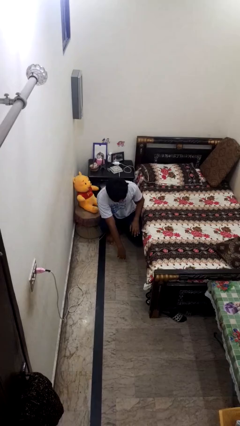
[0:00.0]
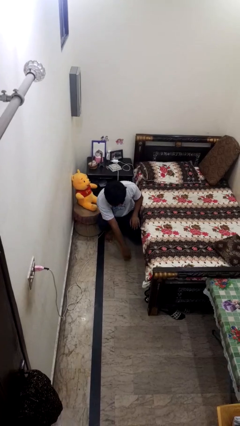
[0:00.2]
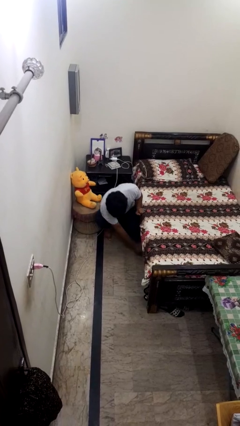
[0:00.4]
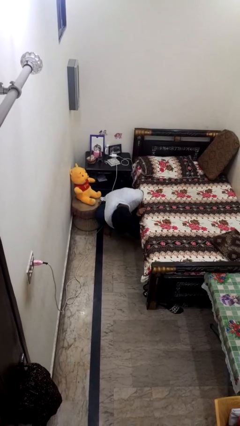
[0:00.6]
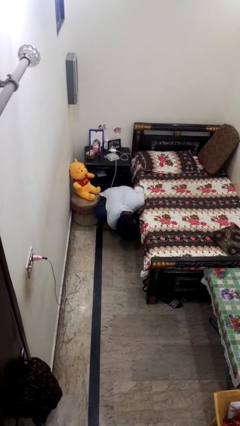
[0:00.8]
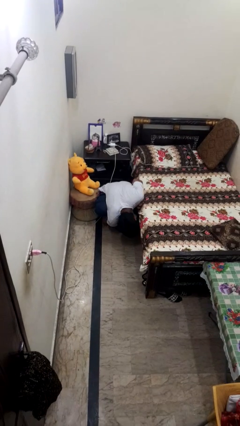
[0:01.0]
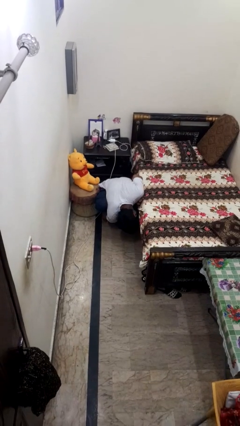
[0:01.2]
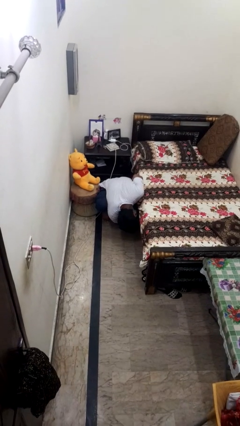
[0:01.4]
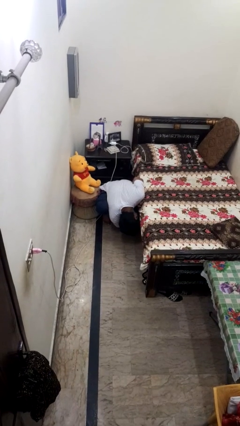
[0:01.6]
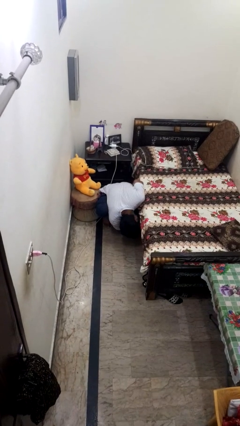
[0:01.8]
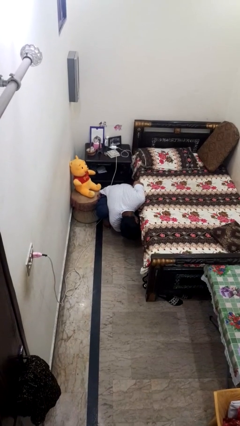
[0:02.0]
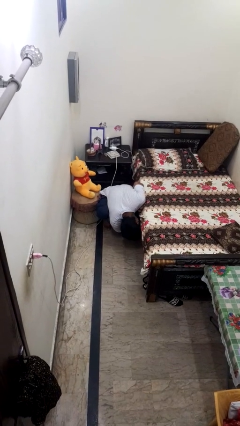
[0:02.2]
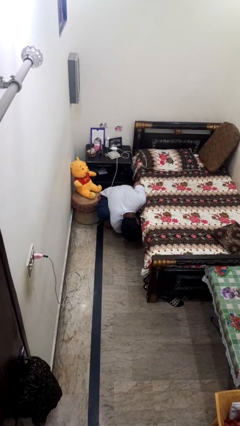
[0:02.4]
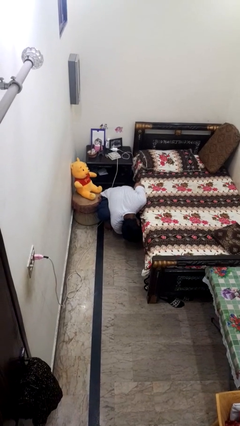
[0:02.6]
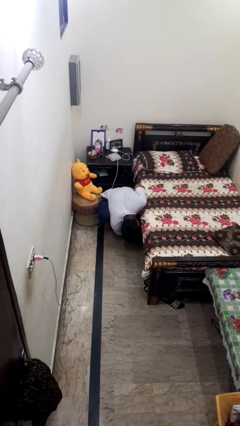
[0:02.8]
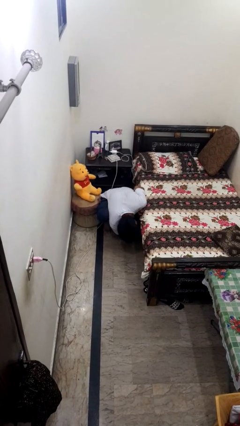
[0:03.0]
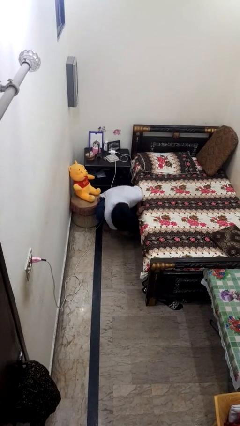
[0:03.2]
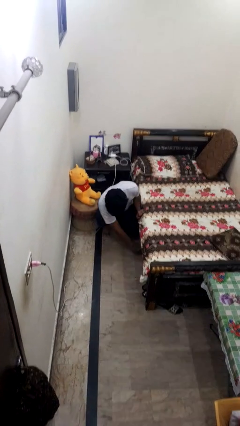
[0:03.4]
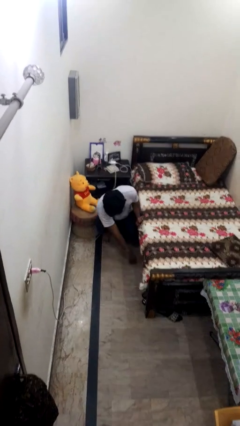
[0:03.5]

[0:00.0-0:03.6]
person searches under bed

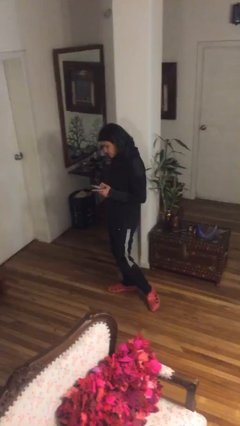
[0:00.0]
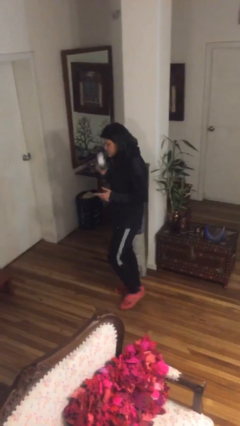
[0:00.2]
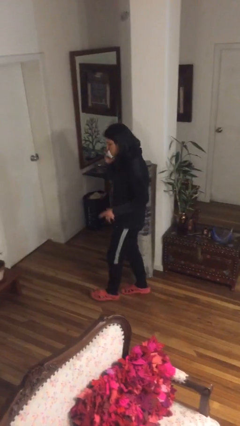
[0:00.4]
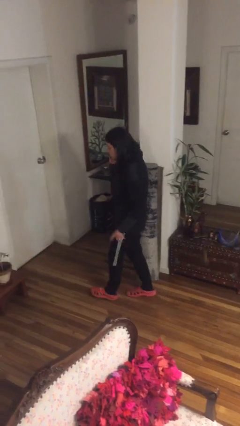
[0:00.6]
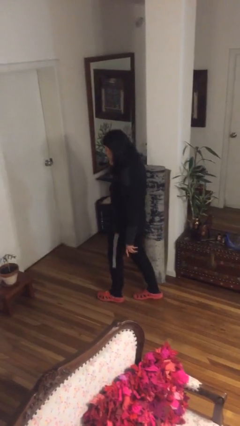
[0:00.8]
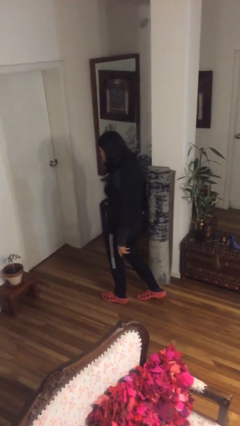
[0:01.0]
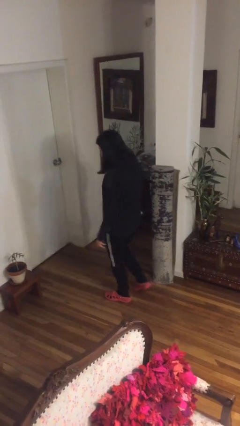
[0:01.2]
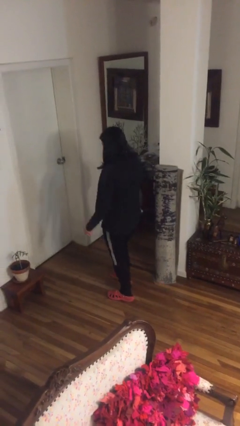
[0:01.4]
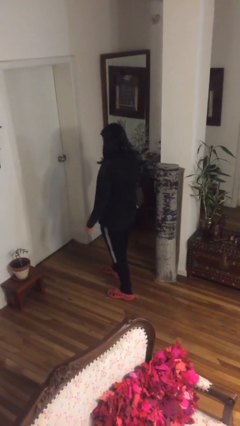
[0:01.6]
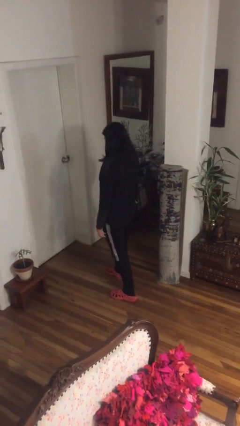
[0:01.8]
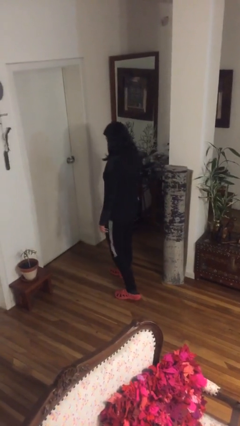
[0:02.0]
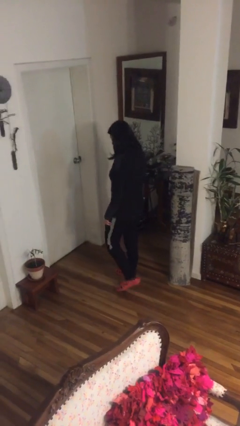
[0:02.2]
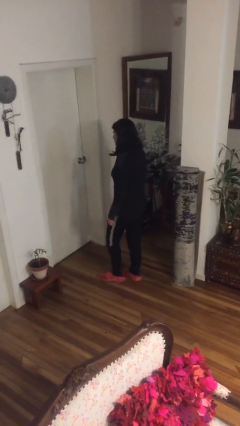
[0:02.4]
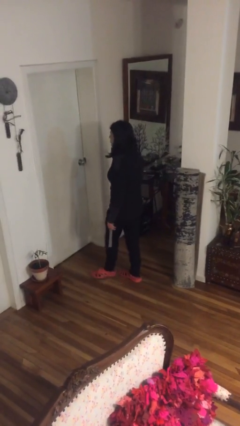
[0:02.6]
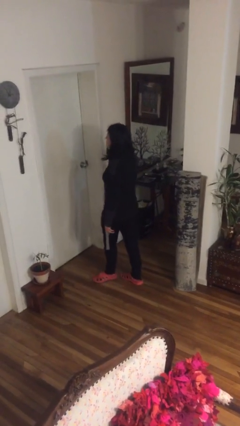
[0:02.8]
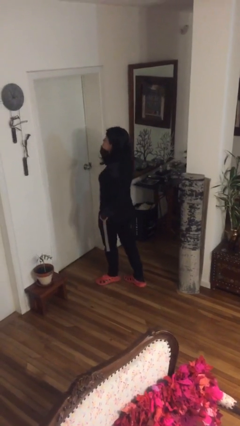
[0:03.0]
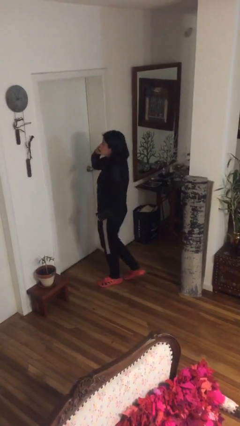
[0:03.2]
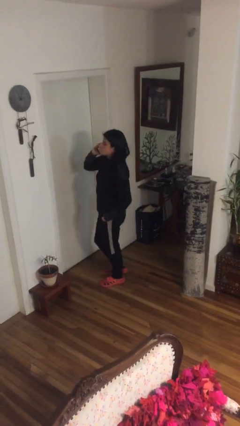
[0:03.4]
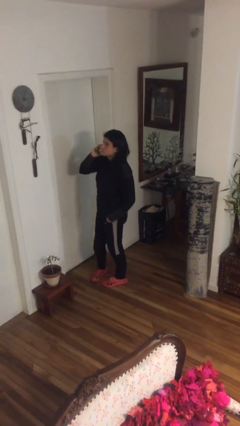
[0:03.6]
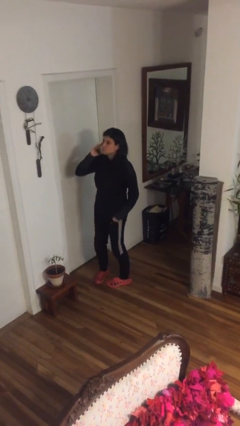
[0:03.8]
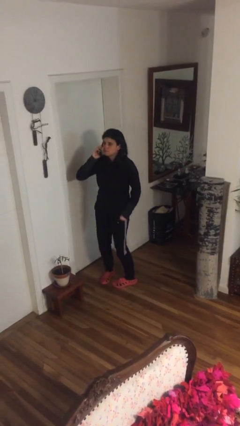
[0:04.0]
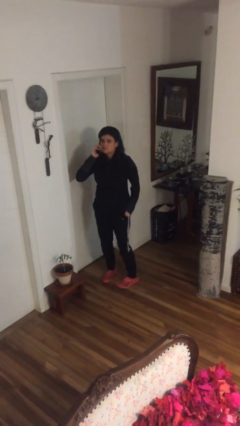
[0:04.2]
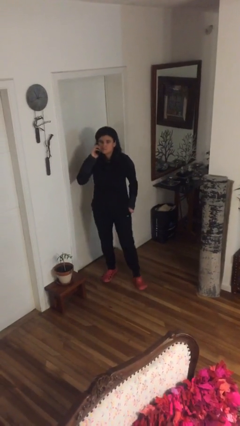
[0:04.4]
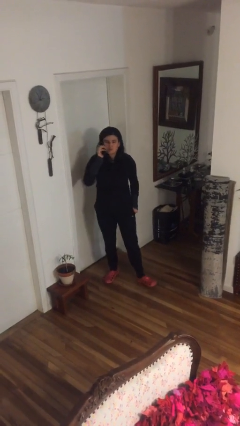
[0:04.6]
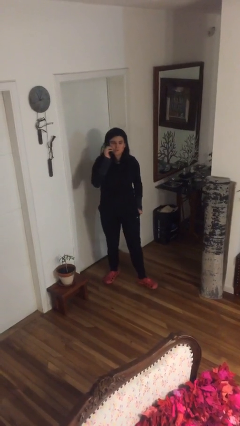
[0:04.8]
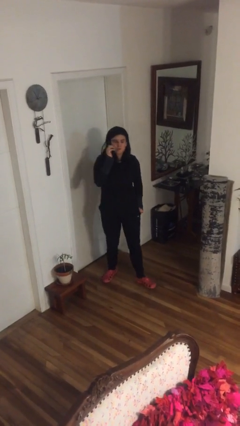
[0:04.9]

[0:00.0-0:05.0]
person talks on phone

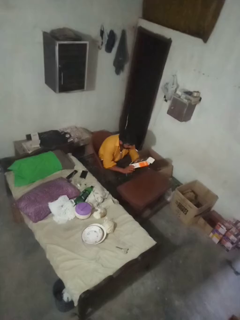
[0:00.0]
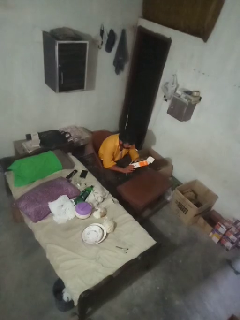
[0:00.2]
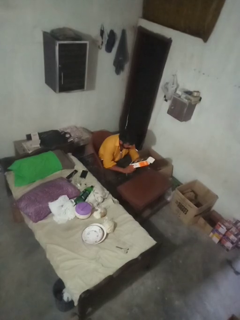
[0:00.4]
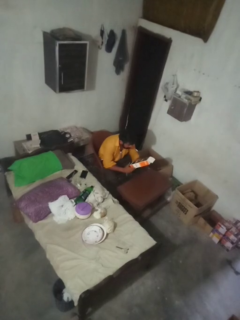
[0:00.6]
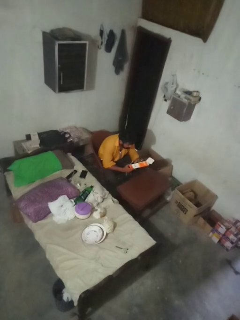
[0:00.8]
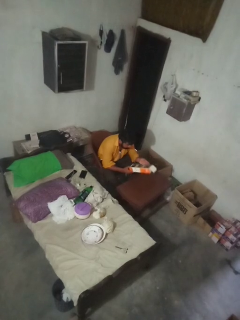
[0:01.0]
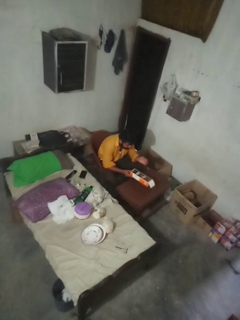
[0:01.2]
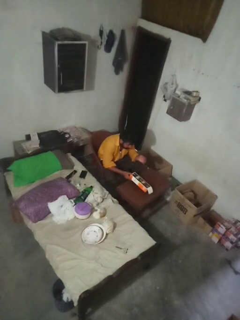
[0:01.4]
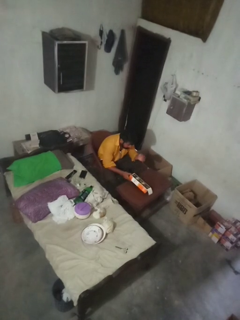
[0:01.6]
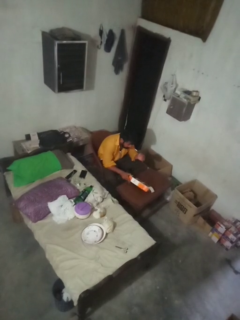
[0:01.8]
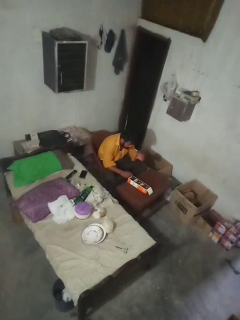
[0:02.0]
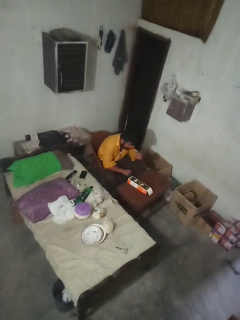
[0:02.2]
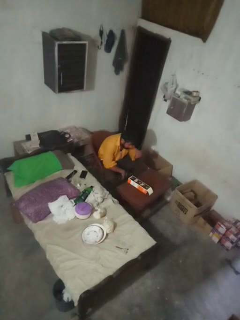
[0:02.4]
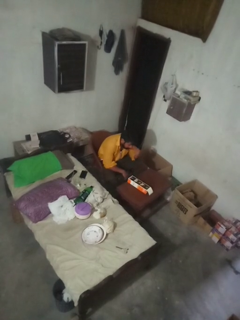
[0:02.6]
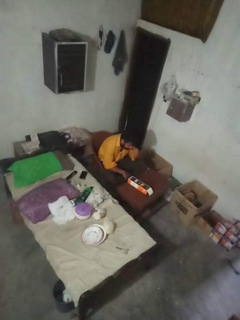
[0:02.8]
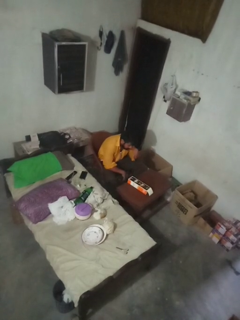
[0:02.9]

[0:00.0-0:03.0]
person puts down object on countertop

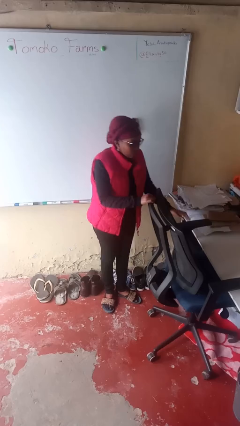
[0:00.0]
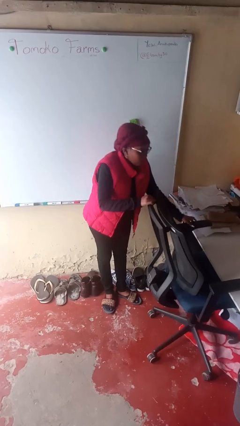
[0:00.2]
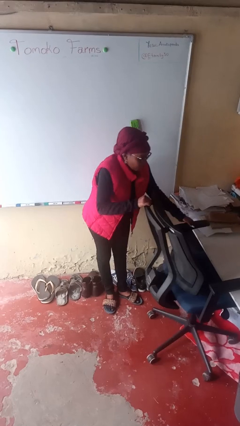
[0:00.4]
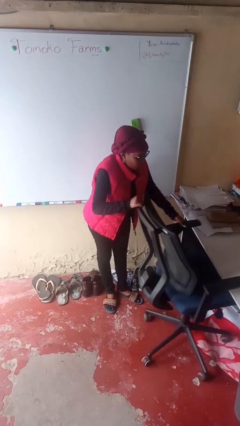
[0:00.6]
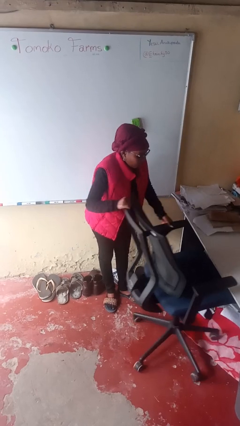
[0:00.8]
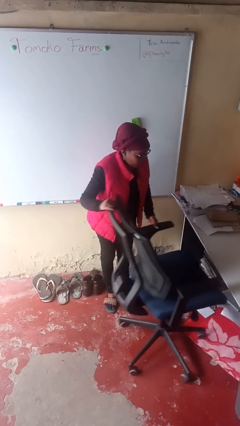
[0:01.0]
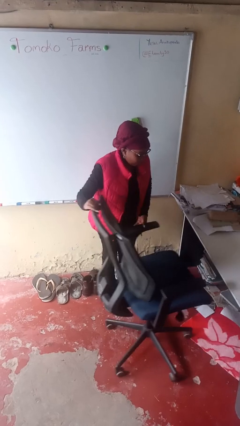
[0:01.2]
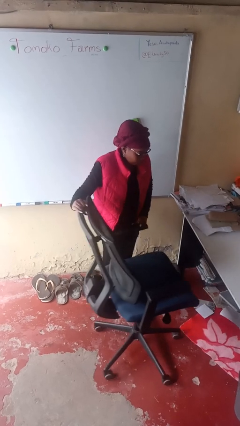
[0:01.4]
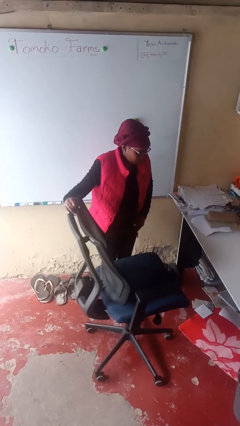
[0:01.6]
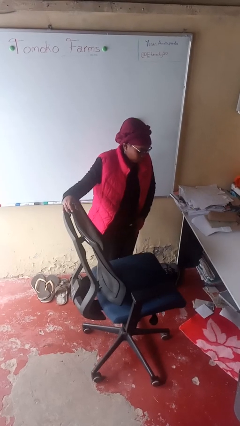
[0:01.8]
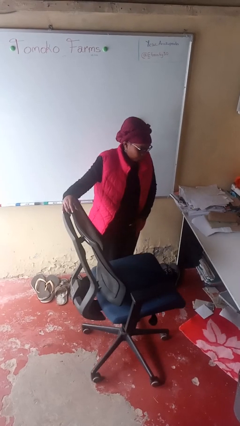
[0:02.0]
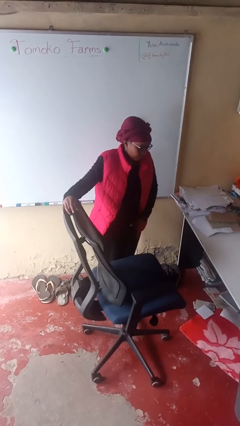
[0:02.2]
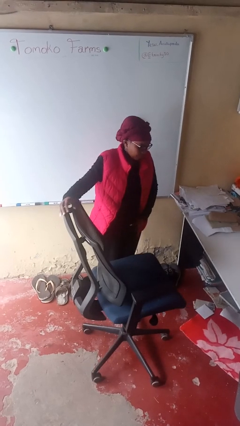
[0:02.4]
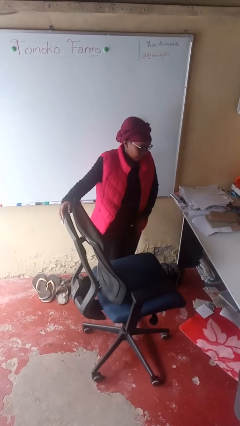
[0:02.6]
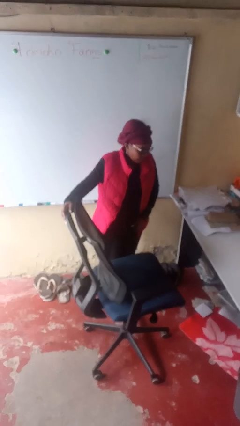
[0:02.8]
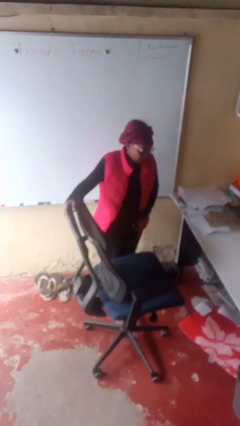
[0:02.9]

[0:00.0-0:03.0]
person pulls out chair

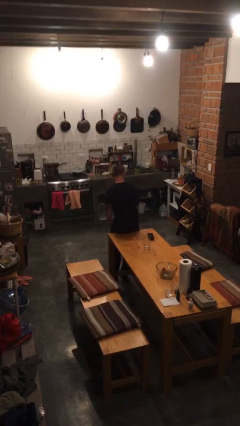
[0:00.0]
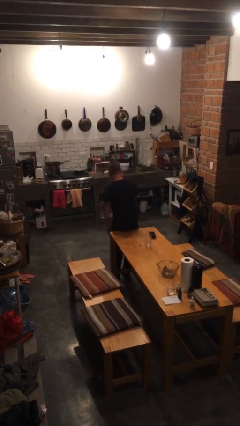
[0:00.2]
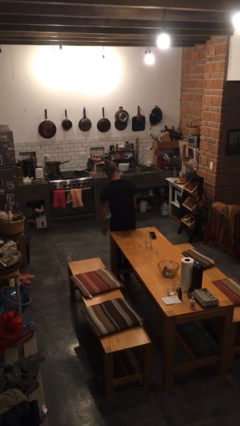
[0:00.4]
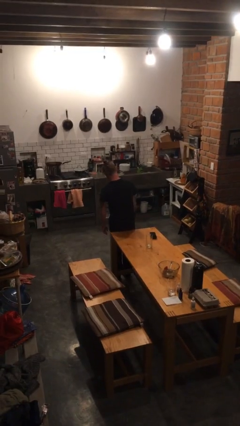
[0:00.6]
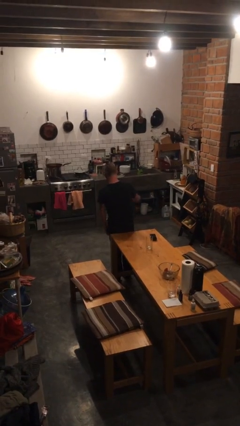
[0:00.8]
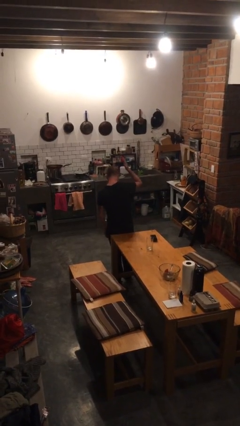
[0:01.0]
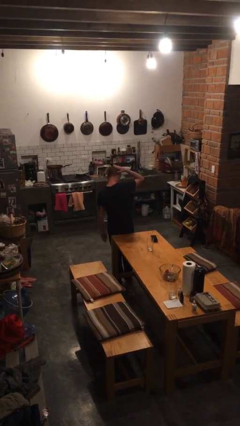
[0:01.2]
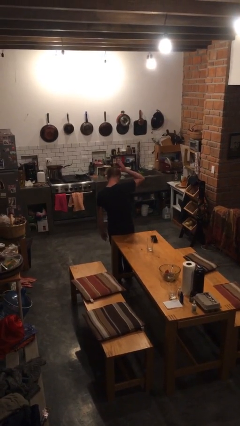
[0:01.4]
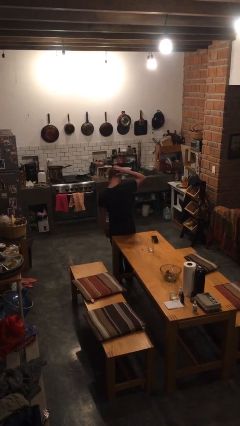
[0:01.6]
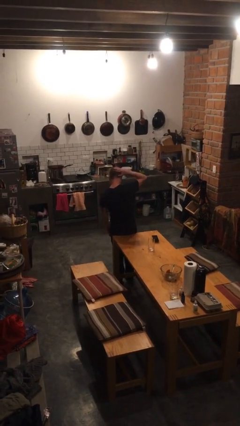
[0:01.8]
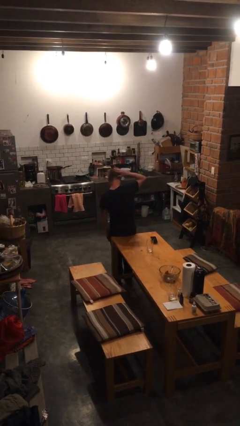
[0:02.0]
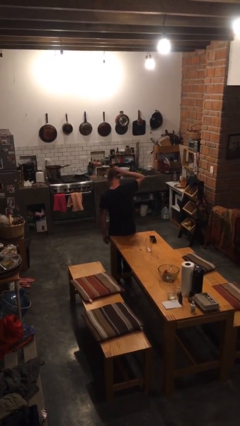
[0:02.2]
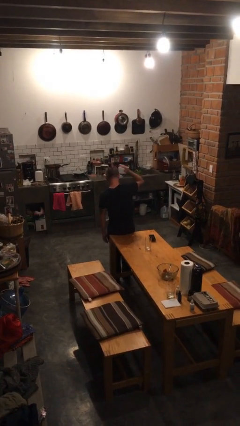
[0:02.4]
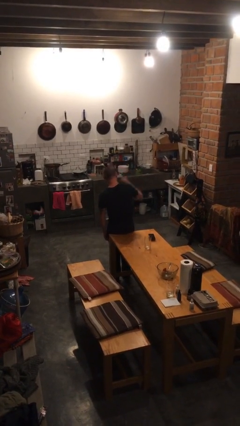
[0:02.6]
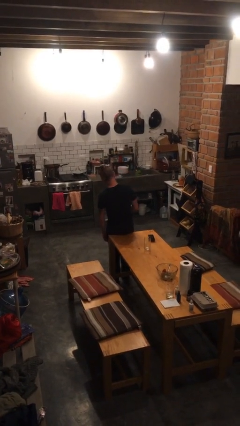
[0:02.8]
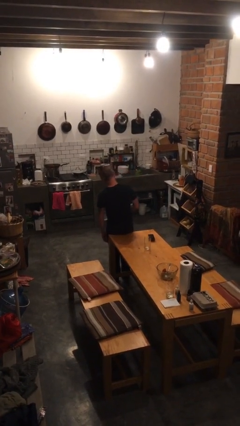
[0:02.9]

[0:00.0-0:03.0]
person pats head

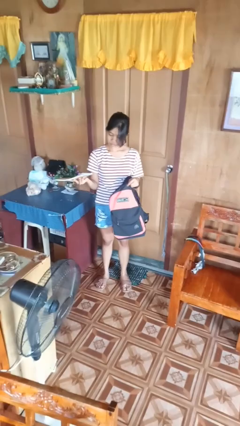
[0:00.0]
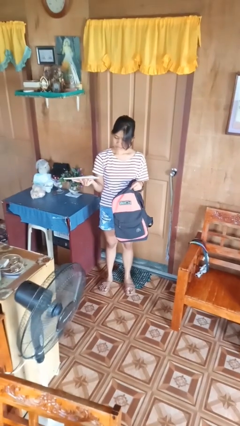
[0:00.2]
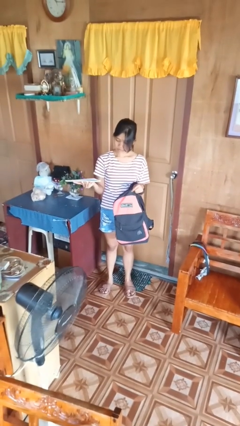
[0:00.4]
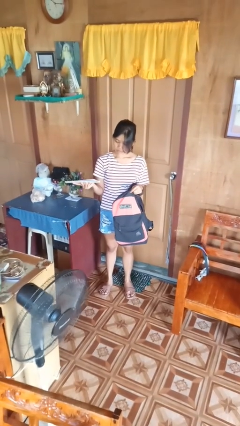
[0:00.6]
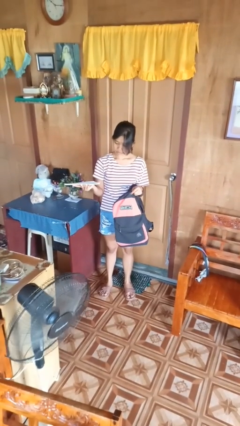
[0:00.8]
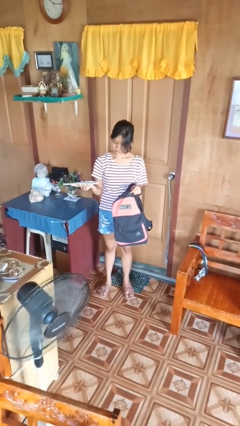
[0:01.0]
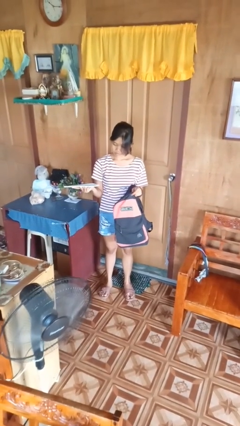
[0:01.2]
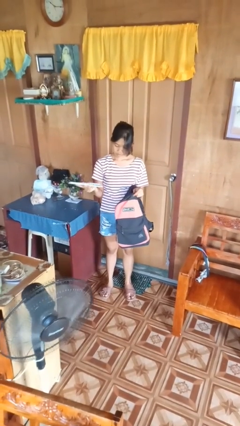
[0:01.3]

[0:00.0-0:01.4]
person takes object from backpack
